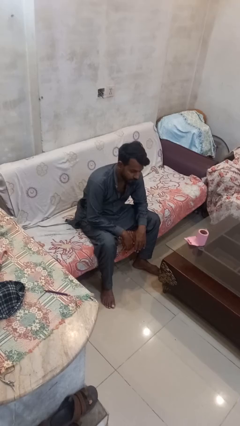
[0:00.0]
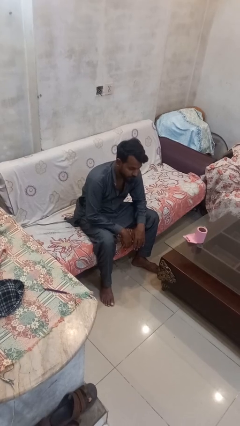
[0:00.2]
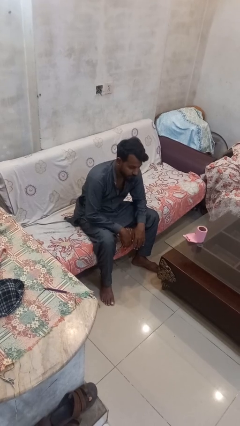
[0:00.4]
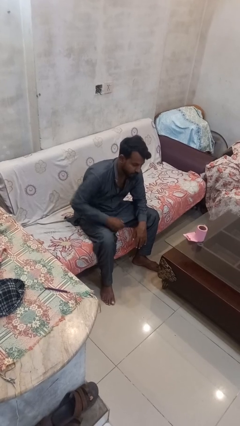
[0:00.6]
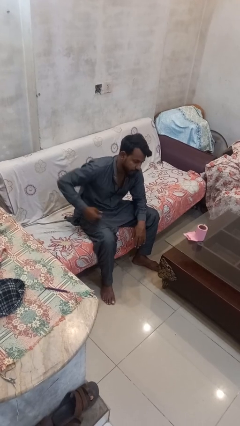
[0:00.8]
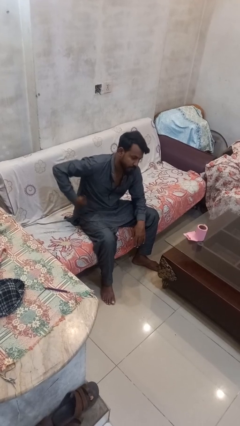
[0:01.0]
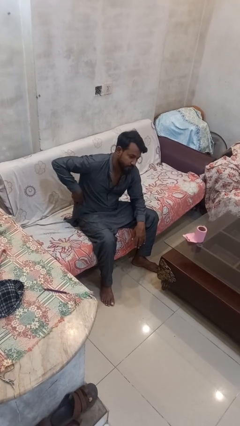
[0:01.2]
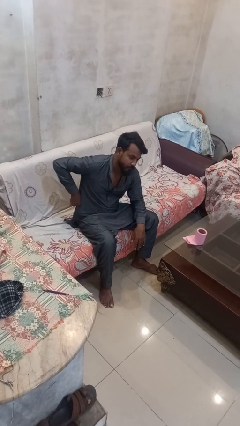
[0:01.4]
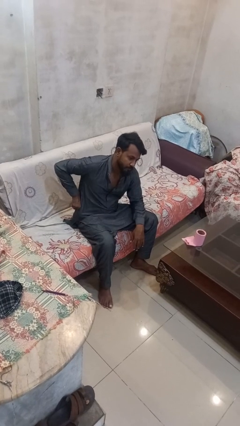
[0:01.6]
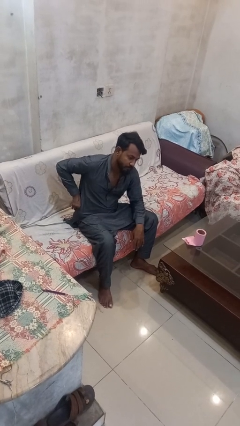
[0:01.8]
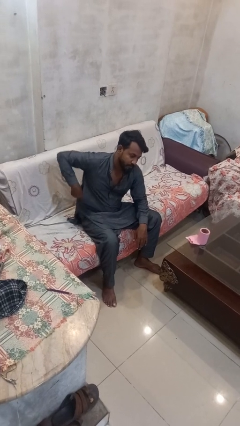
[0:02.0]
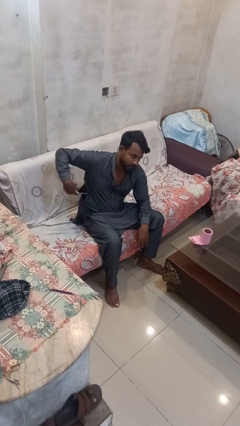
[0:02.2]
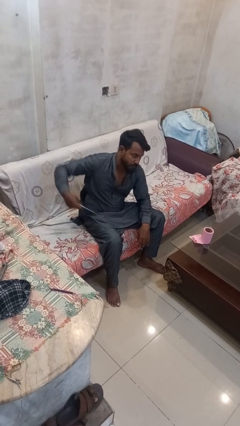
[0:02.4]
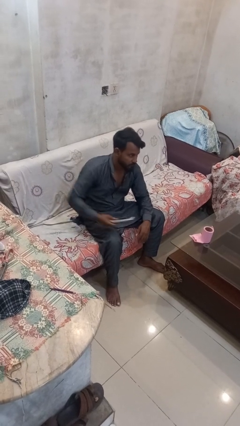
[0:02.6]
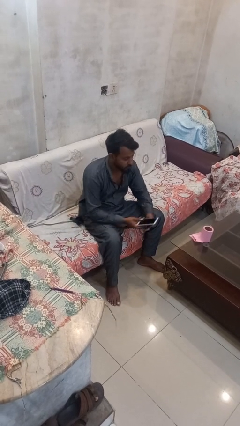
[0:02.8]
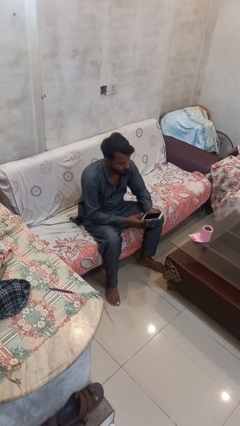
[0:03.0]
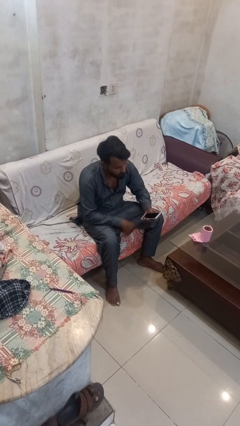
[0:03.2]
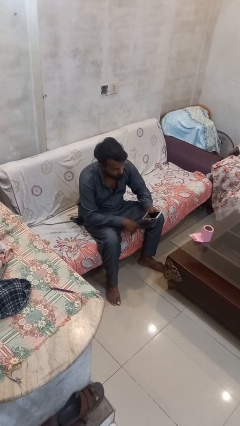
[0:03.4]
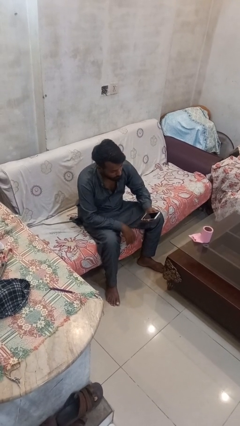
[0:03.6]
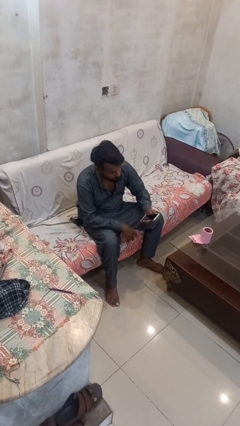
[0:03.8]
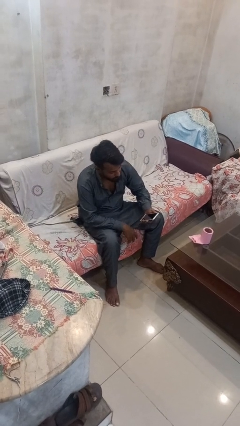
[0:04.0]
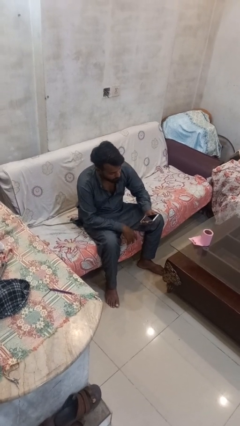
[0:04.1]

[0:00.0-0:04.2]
person takes phone from pocket

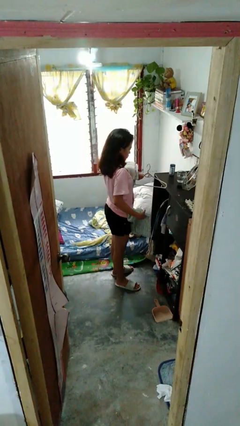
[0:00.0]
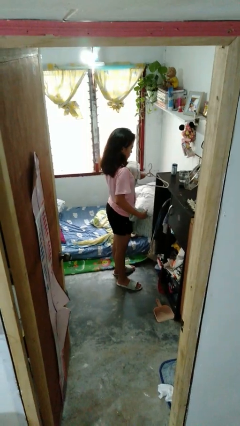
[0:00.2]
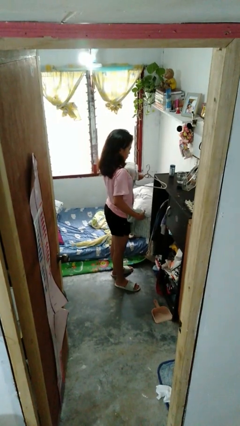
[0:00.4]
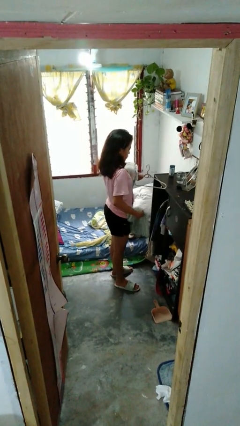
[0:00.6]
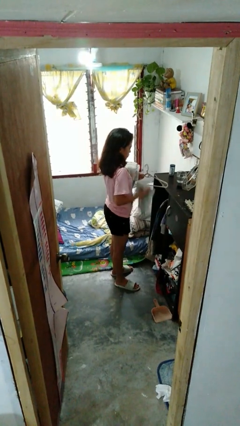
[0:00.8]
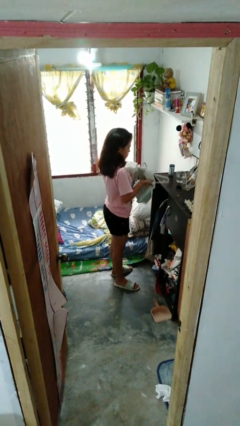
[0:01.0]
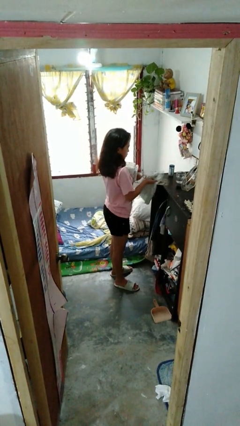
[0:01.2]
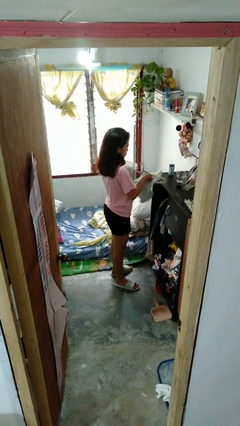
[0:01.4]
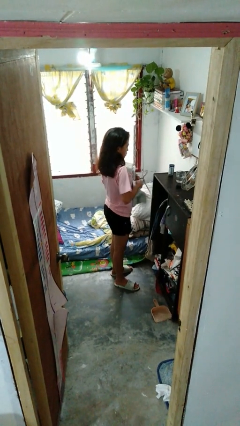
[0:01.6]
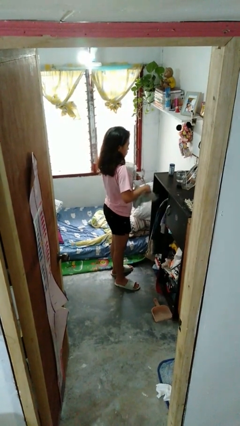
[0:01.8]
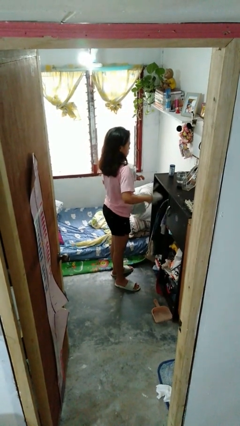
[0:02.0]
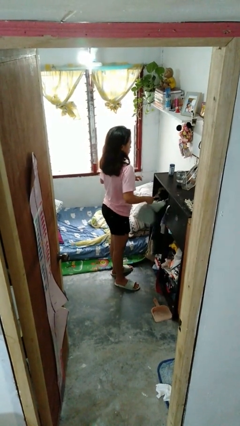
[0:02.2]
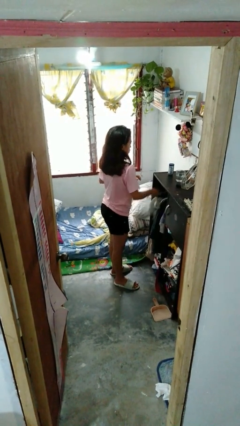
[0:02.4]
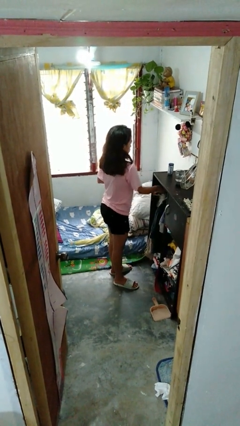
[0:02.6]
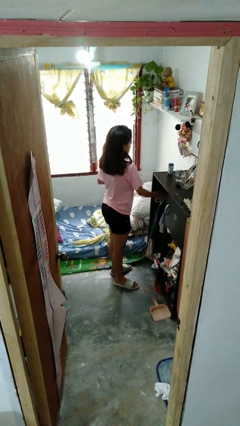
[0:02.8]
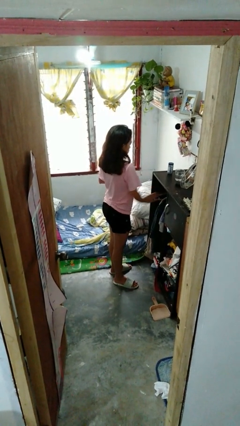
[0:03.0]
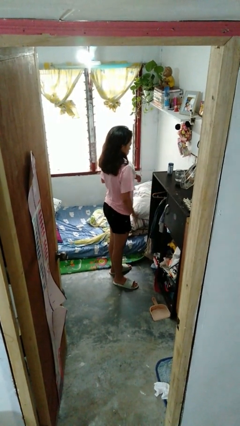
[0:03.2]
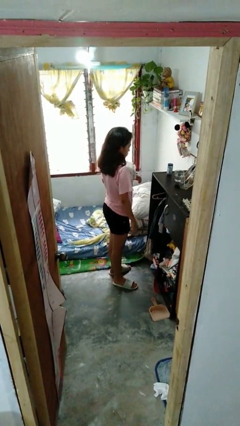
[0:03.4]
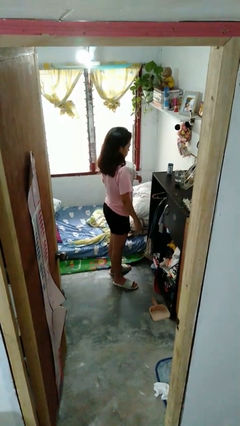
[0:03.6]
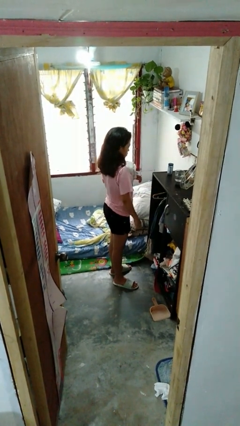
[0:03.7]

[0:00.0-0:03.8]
person puts clothes into closet

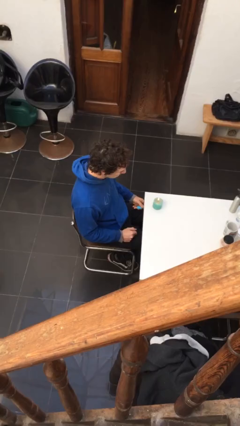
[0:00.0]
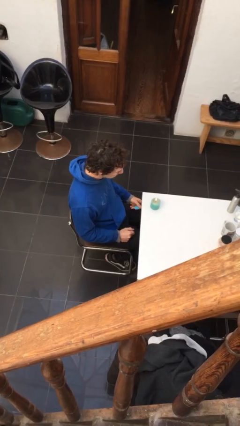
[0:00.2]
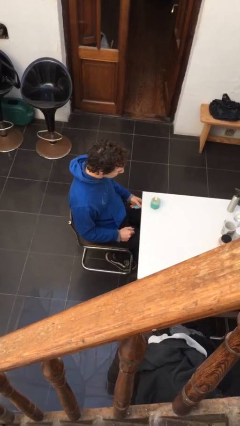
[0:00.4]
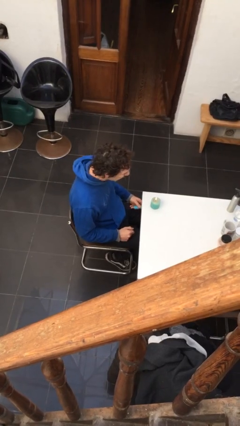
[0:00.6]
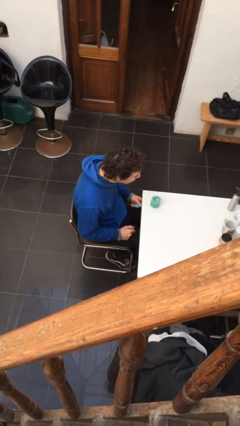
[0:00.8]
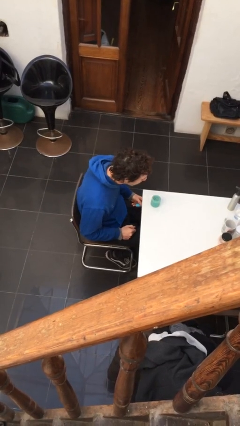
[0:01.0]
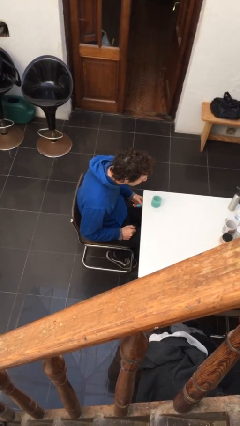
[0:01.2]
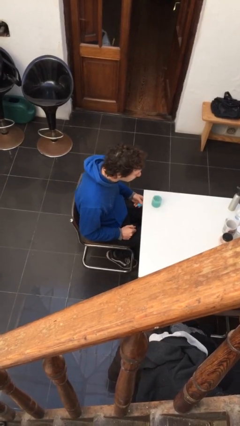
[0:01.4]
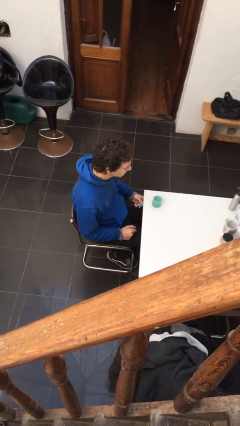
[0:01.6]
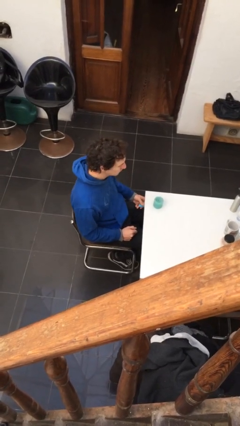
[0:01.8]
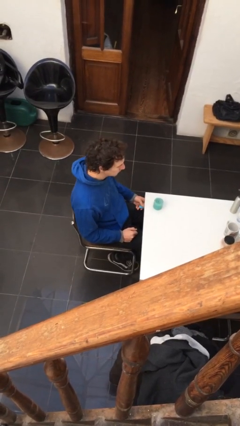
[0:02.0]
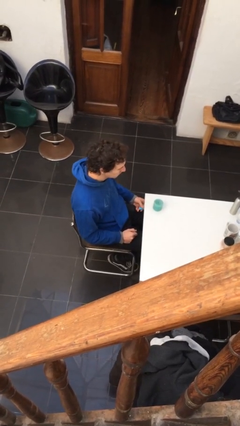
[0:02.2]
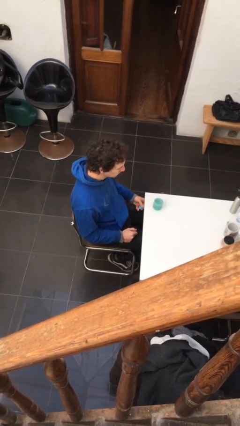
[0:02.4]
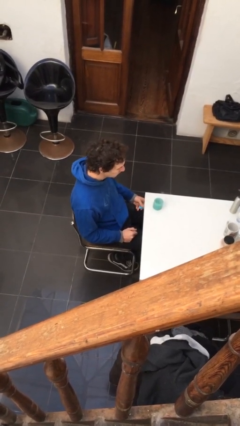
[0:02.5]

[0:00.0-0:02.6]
person extinguishes candle

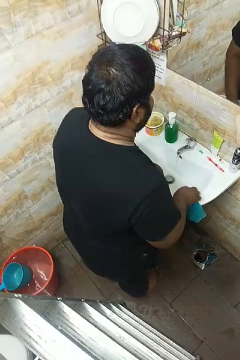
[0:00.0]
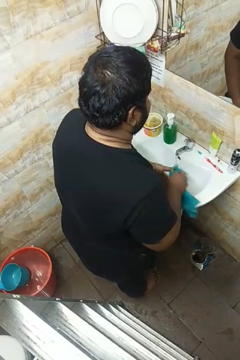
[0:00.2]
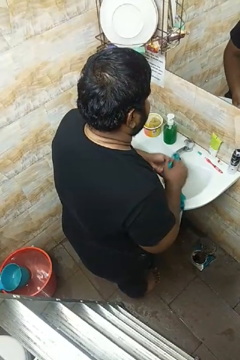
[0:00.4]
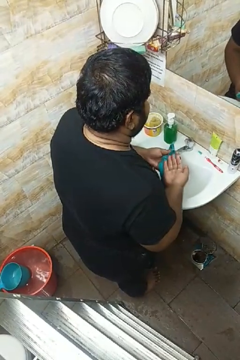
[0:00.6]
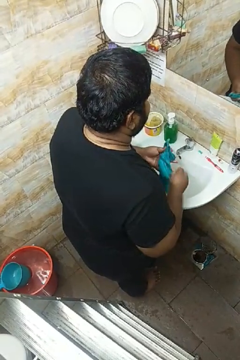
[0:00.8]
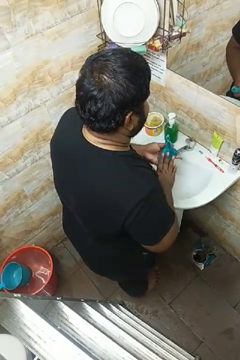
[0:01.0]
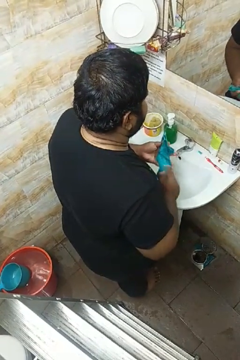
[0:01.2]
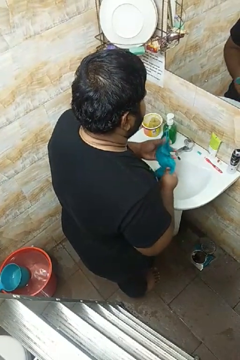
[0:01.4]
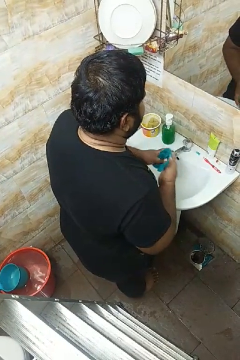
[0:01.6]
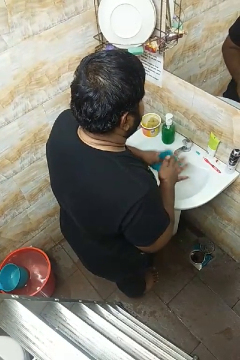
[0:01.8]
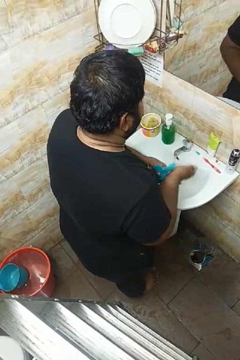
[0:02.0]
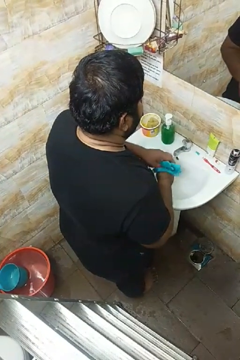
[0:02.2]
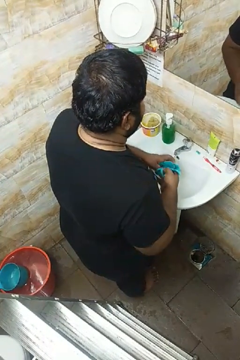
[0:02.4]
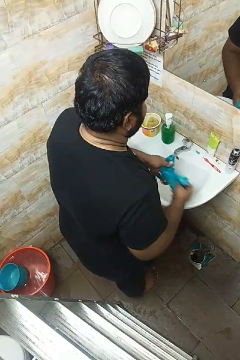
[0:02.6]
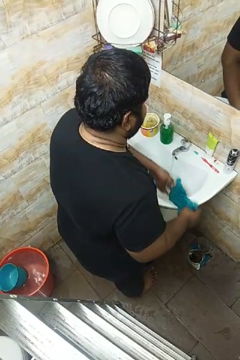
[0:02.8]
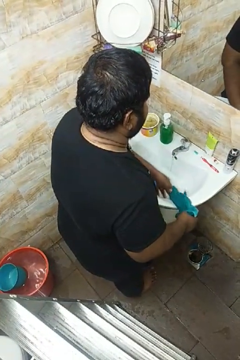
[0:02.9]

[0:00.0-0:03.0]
person dries hands with towel

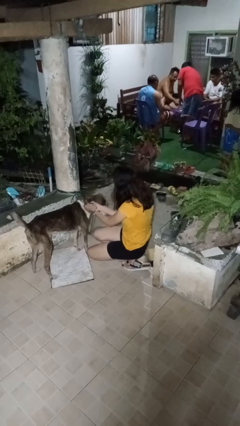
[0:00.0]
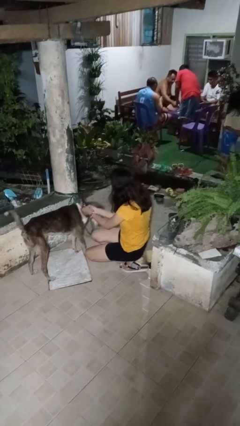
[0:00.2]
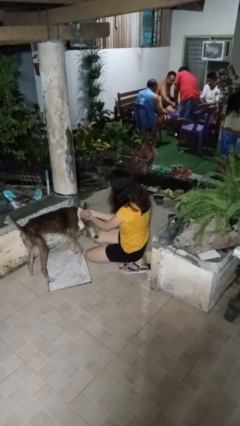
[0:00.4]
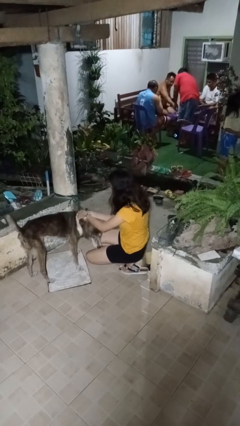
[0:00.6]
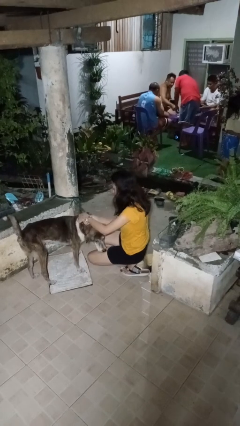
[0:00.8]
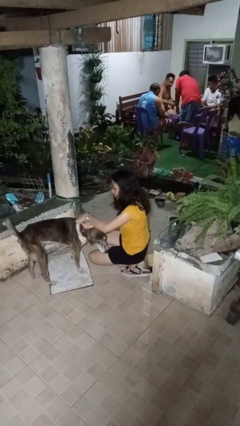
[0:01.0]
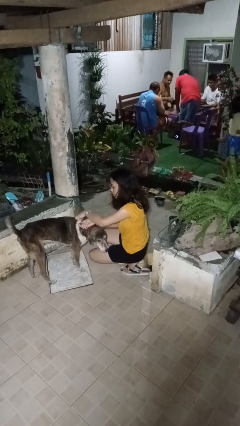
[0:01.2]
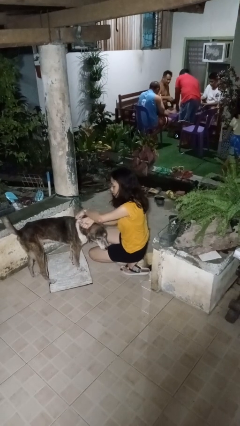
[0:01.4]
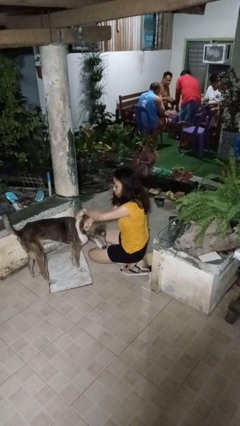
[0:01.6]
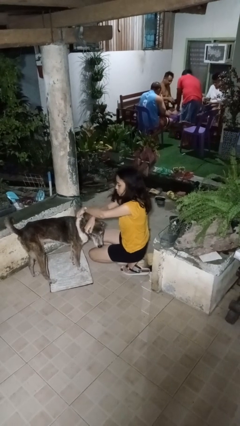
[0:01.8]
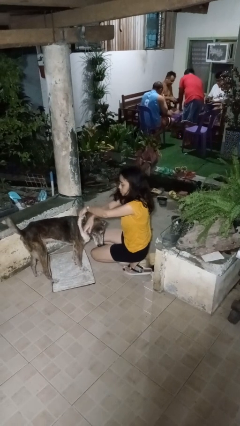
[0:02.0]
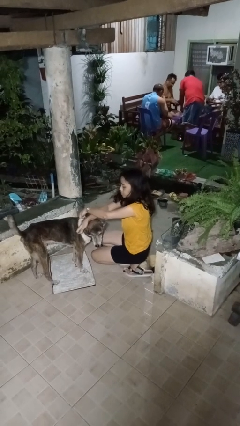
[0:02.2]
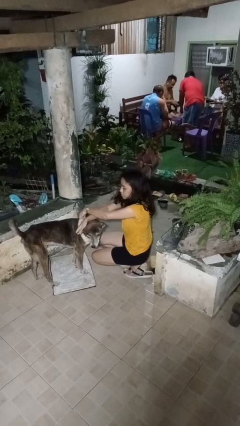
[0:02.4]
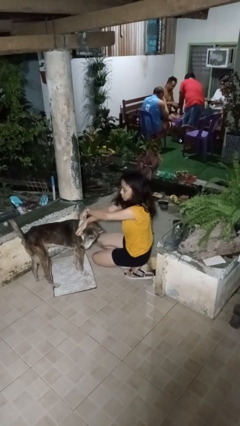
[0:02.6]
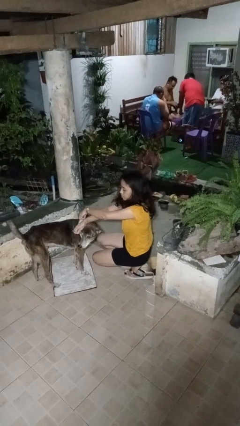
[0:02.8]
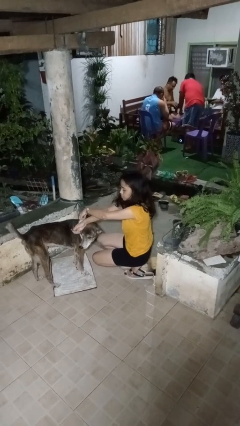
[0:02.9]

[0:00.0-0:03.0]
person unattaches leash from dog

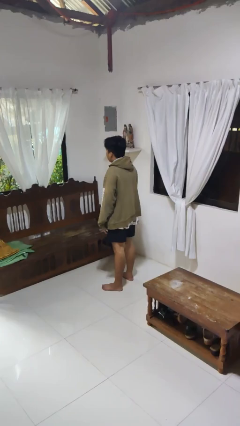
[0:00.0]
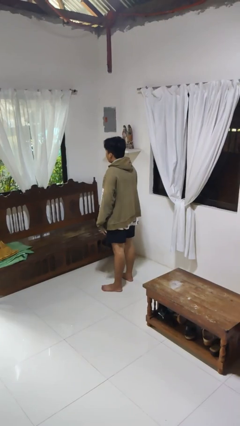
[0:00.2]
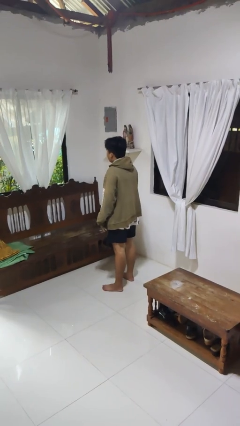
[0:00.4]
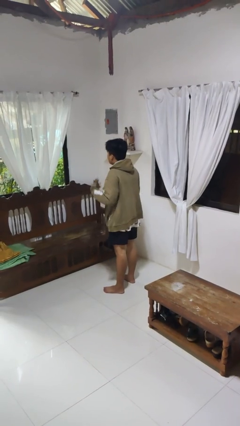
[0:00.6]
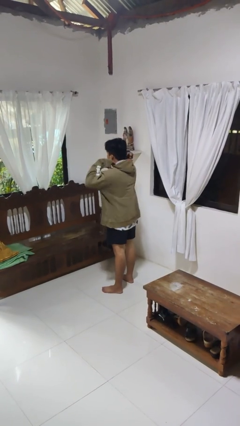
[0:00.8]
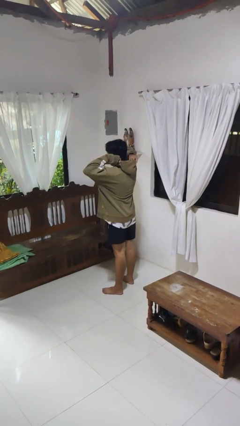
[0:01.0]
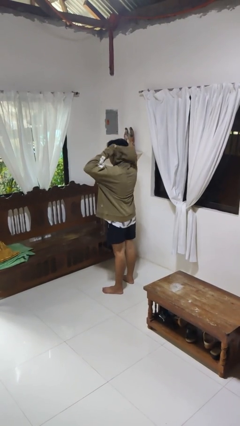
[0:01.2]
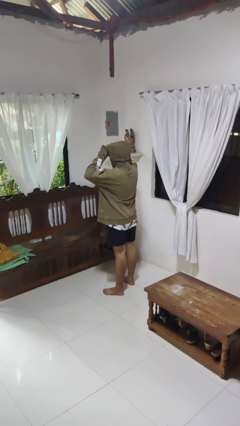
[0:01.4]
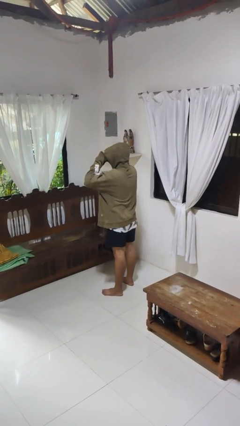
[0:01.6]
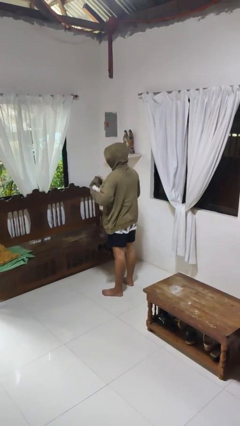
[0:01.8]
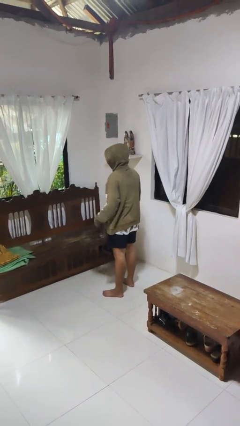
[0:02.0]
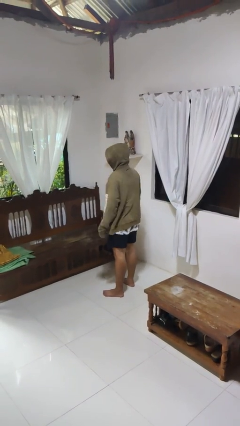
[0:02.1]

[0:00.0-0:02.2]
person puts on hoodie
